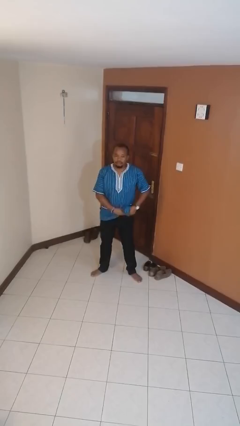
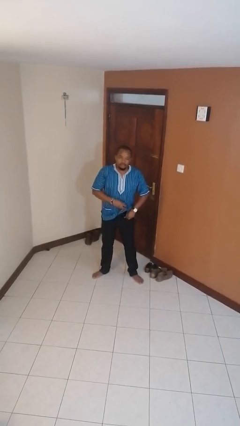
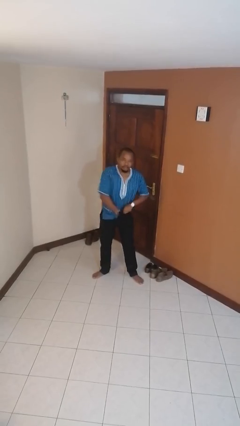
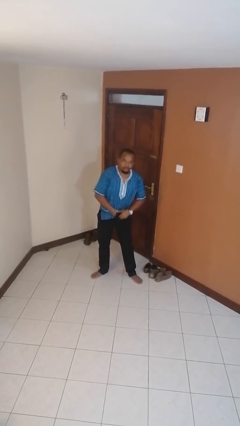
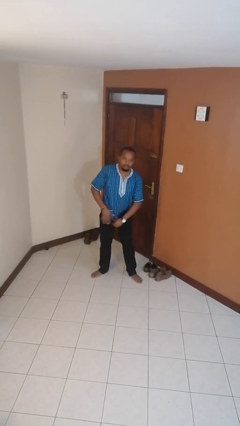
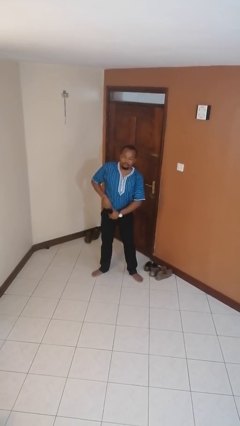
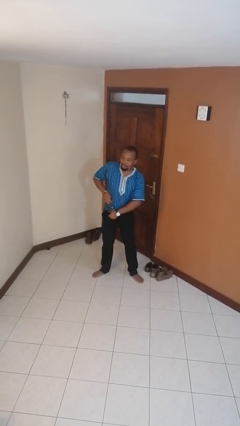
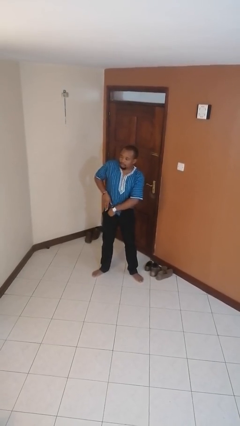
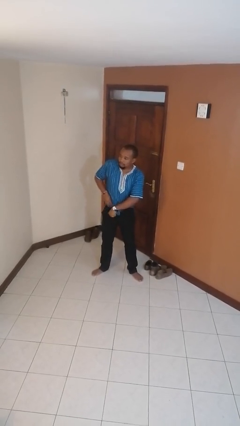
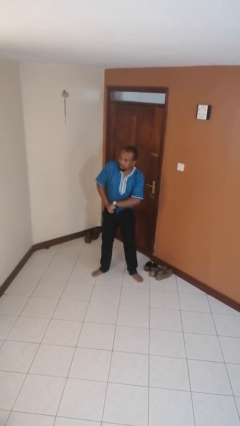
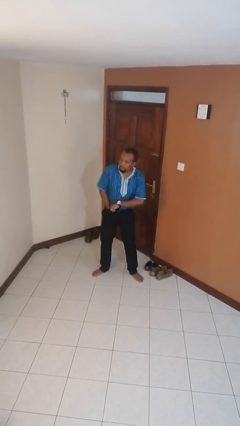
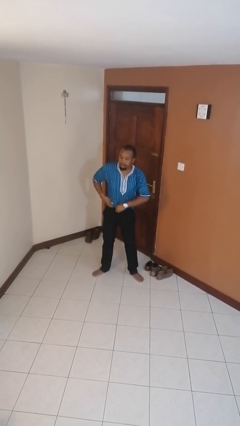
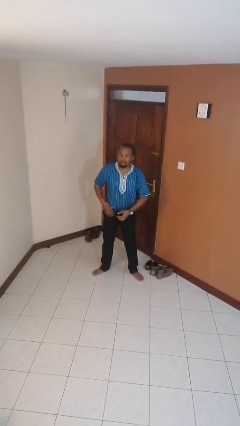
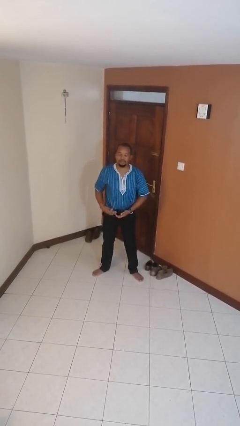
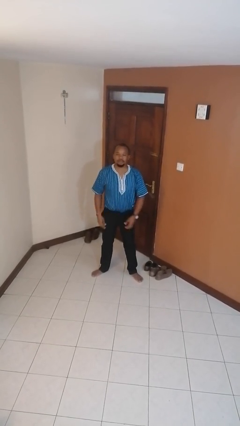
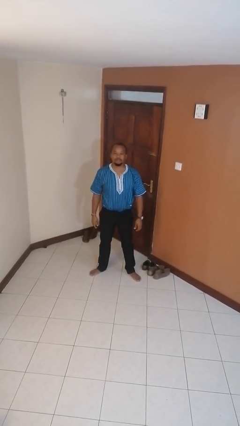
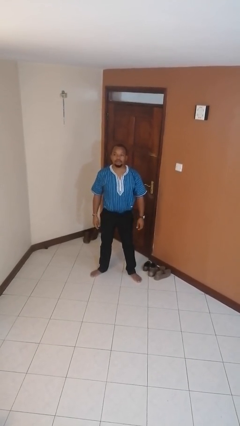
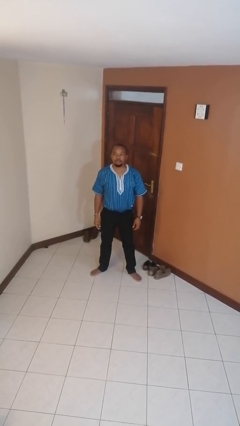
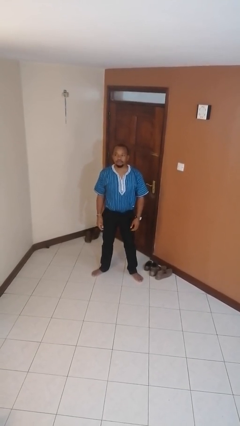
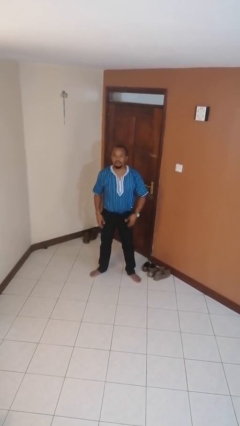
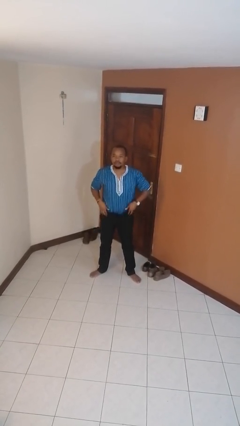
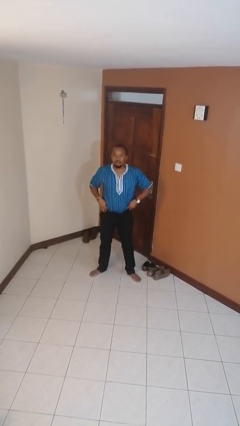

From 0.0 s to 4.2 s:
person tucks in shirt

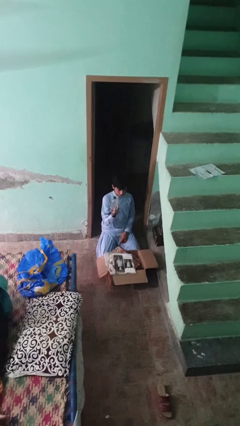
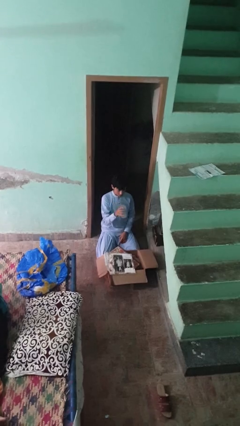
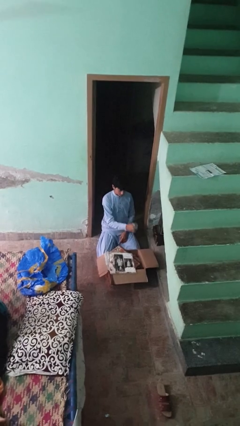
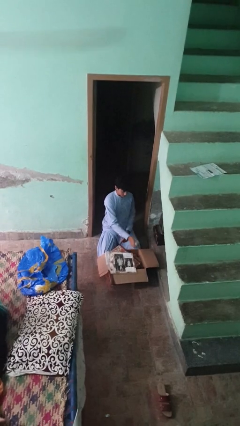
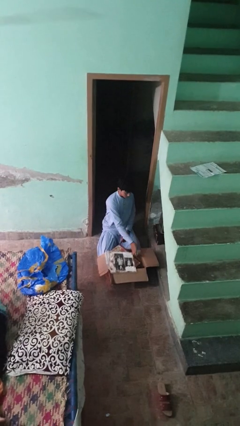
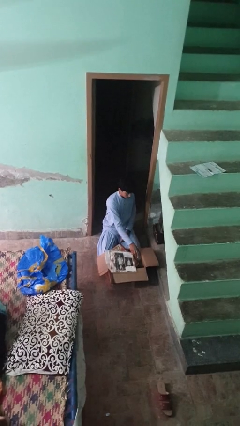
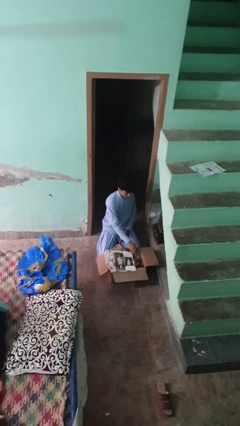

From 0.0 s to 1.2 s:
person puts object into box

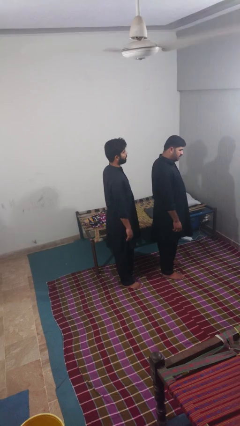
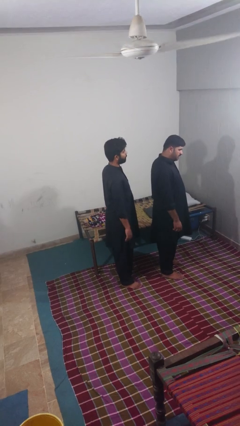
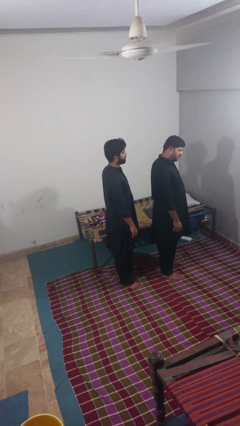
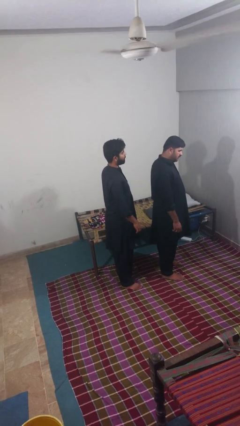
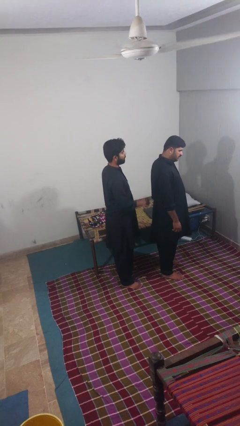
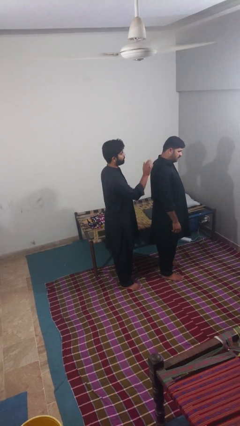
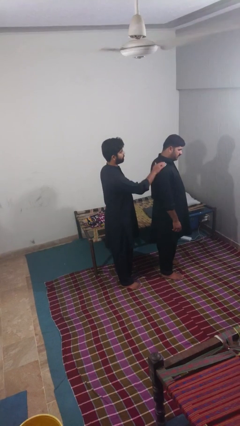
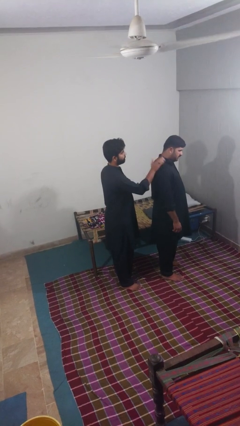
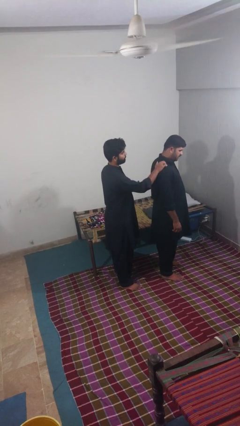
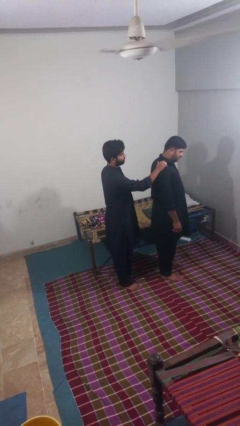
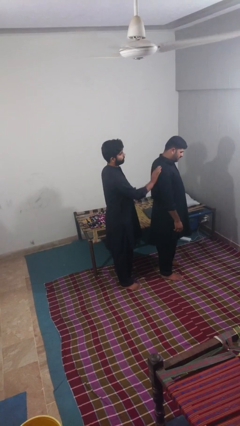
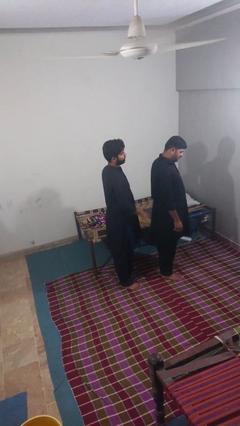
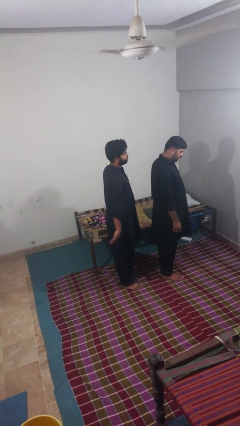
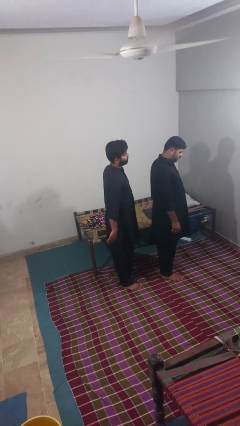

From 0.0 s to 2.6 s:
person touches back of person

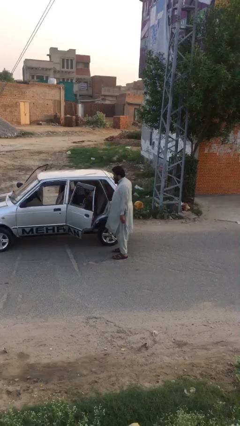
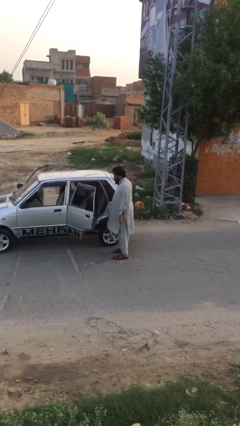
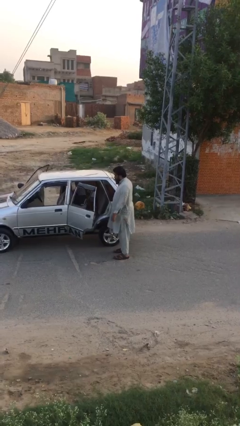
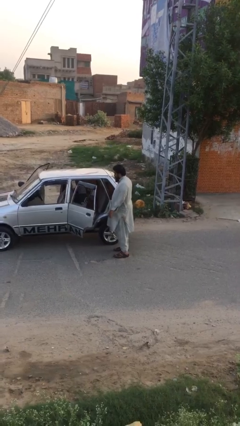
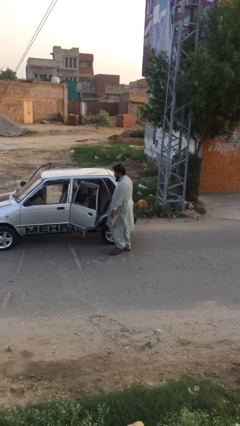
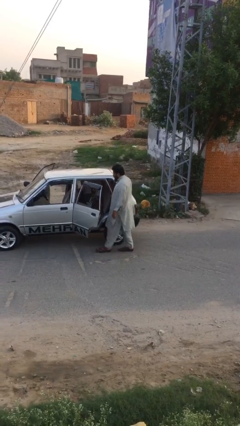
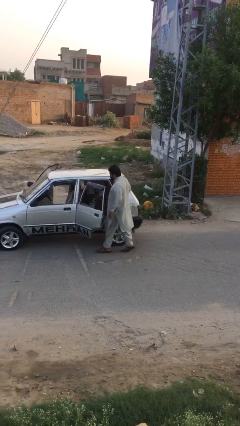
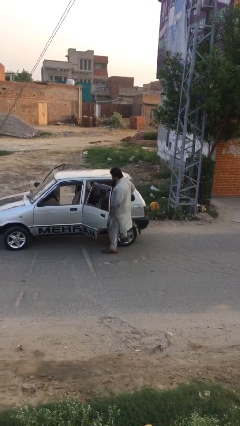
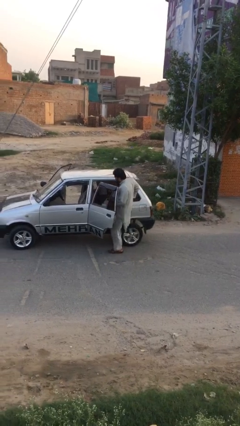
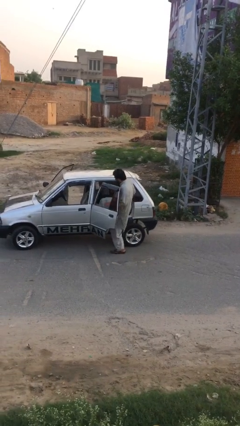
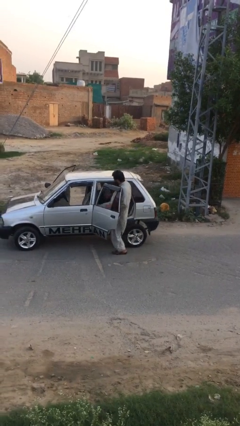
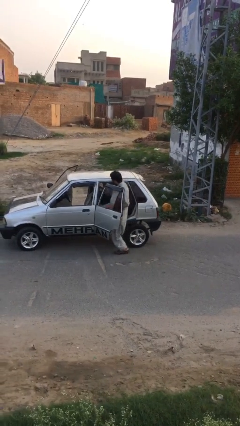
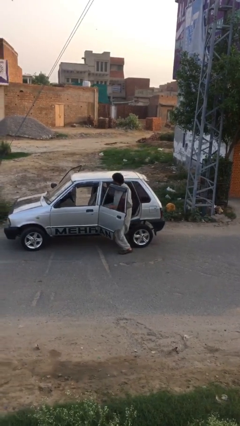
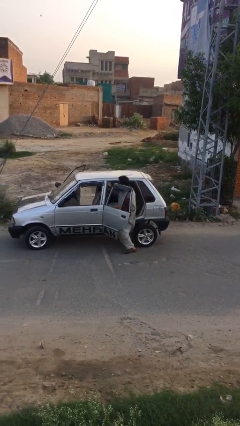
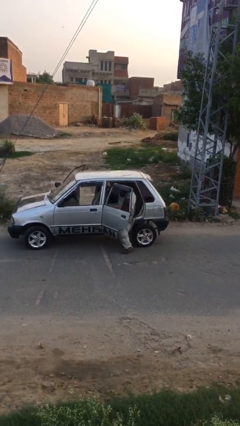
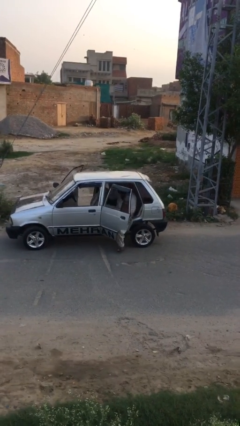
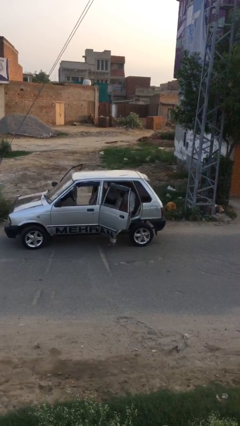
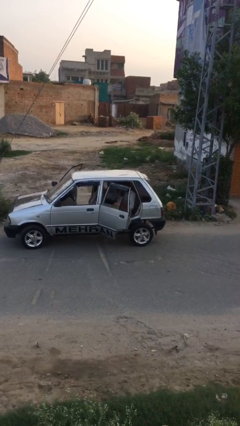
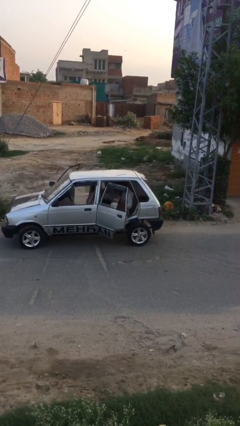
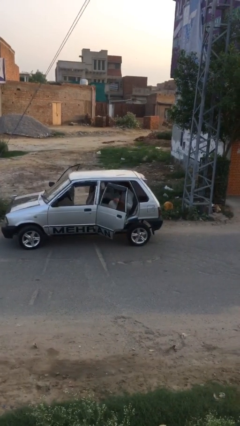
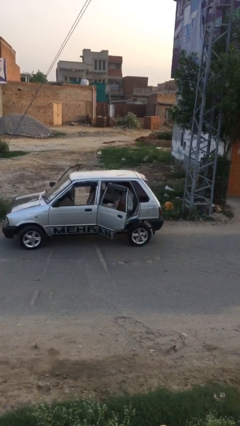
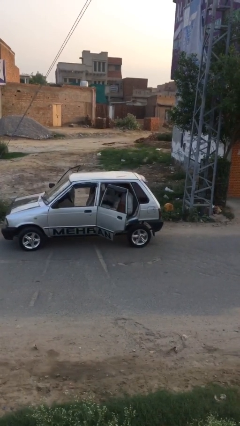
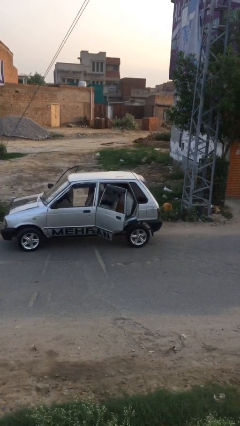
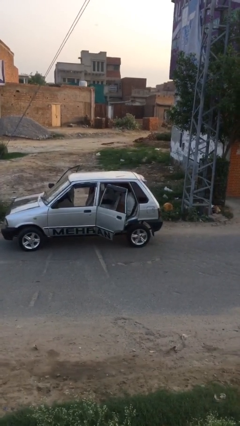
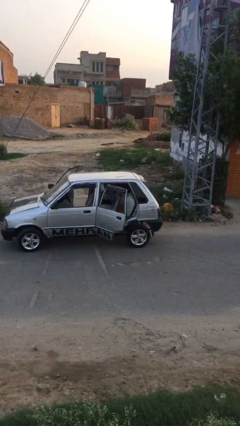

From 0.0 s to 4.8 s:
person enters car

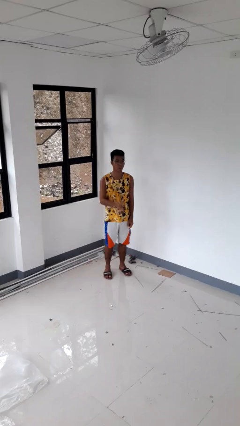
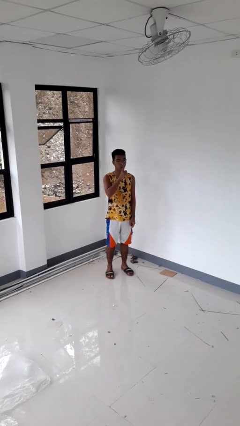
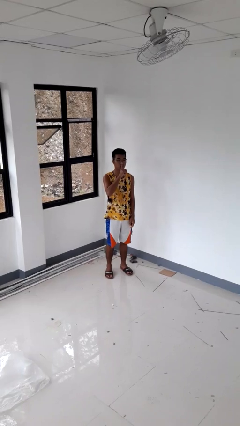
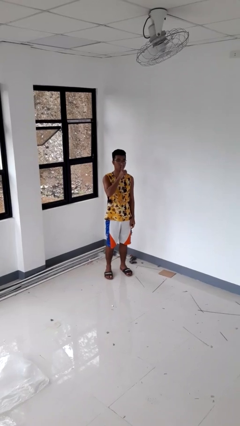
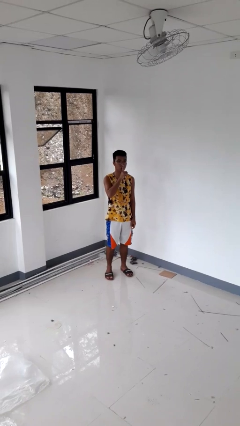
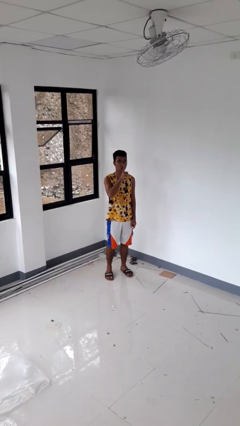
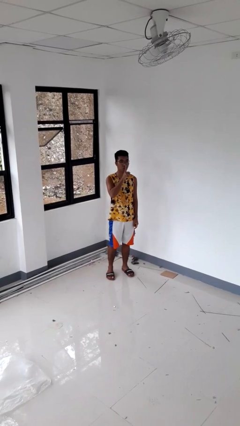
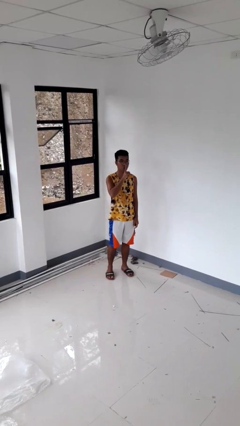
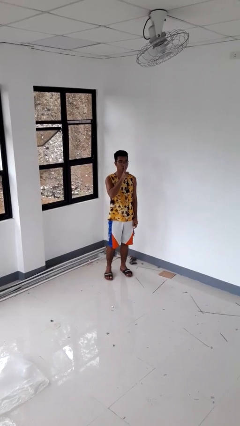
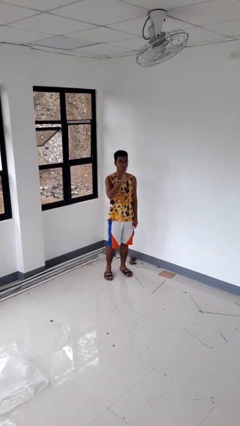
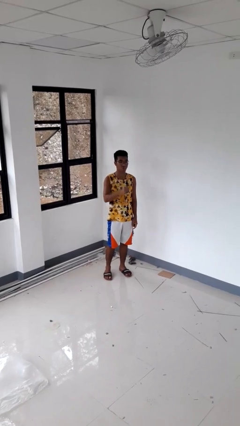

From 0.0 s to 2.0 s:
person gestures be quiet

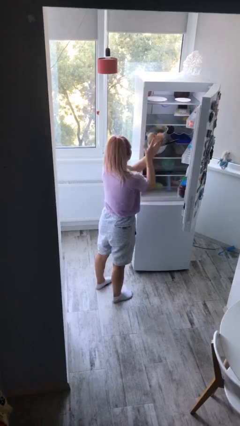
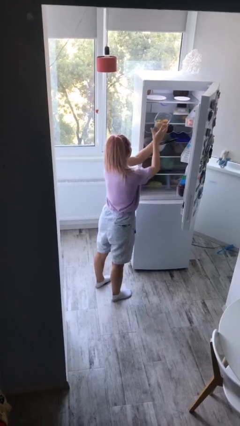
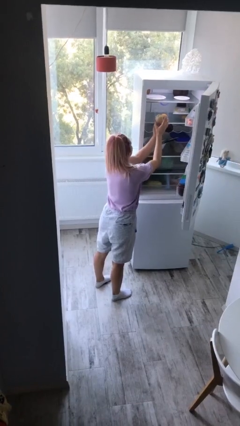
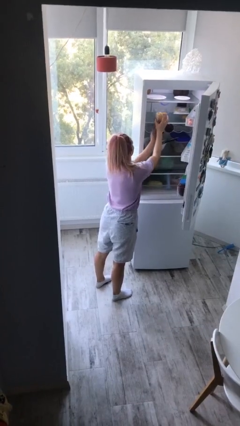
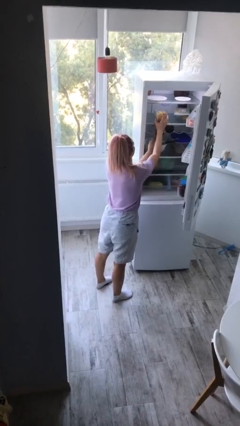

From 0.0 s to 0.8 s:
person puts object into refrigerator

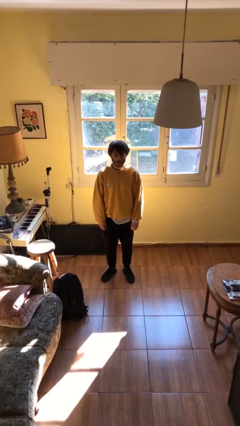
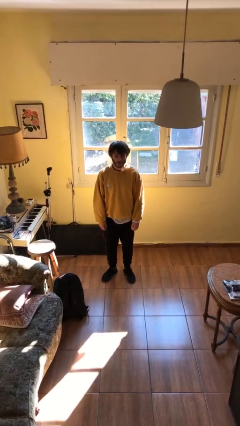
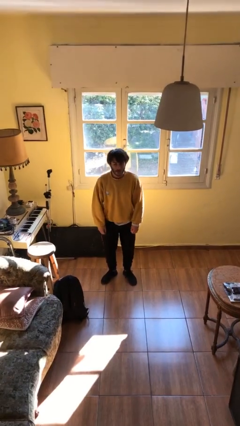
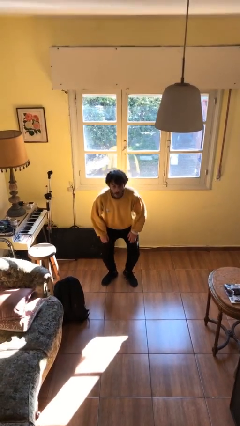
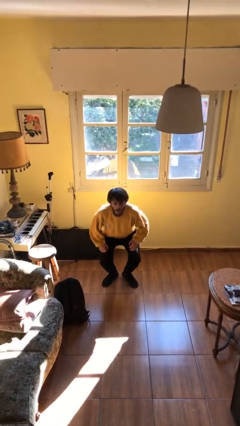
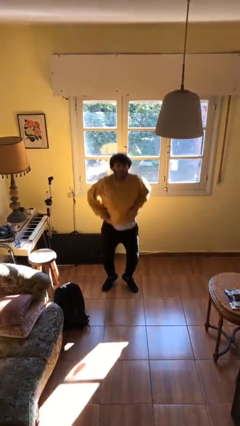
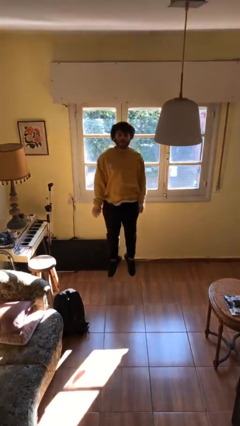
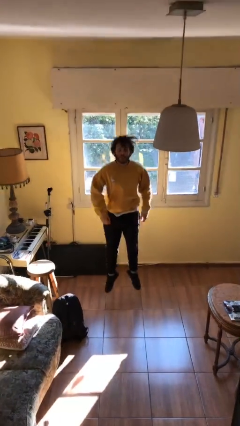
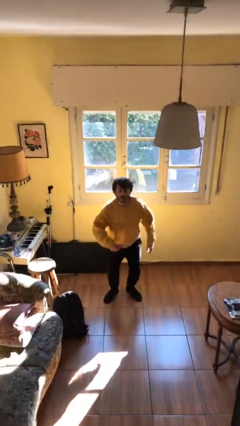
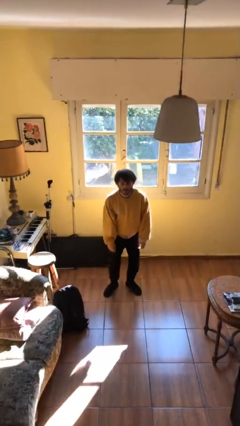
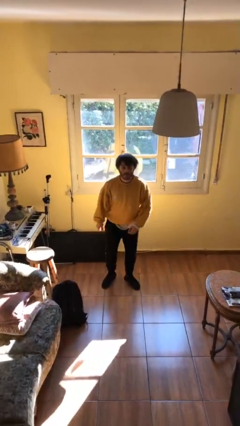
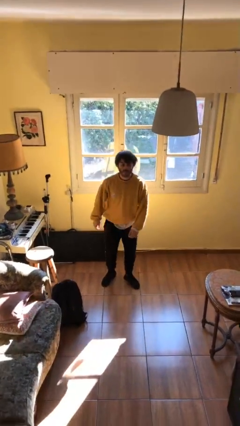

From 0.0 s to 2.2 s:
person jumps
